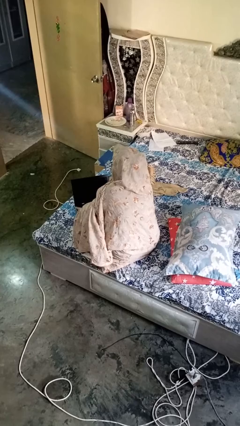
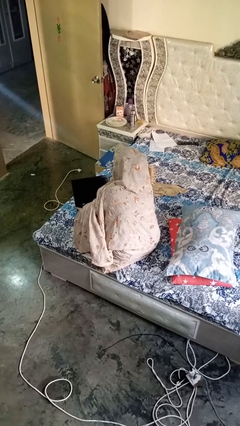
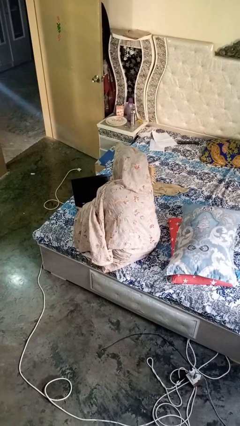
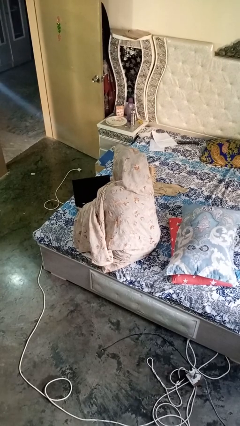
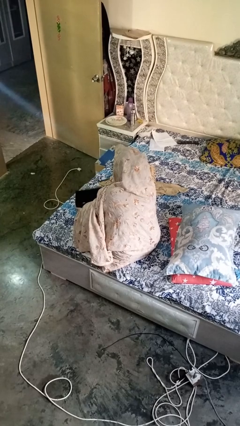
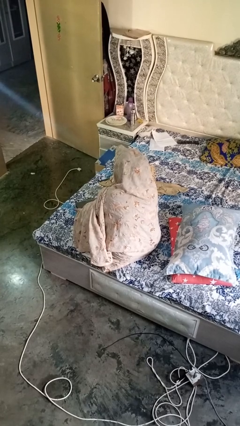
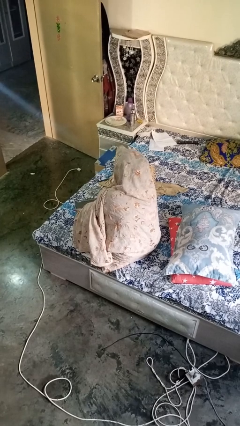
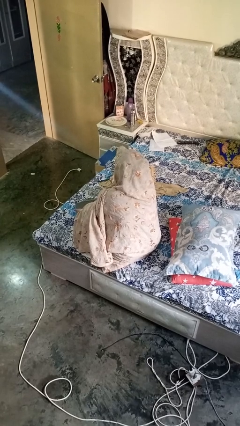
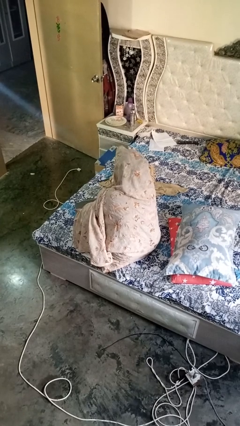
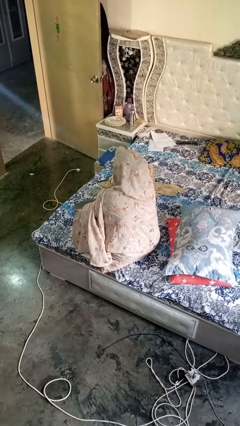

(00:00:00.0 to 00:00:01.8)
person closes laptop

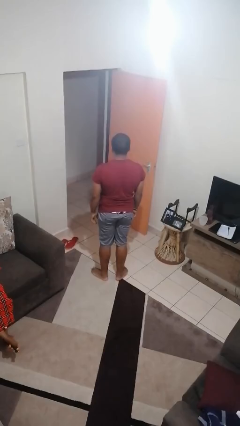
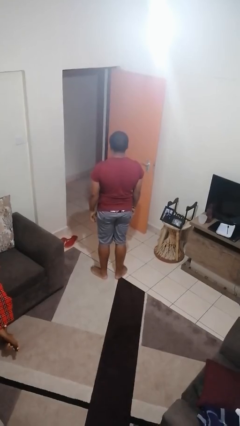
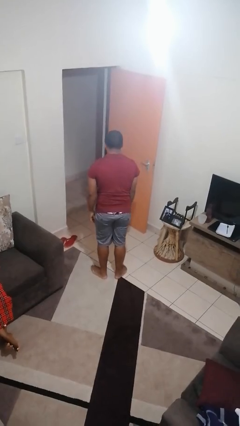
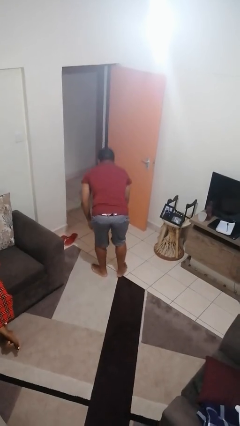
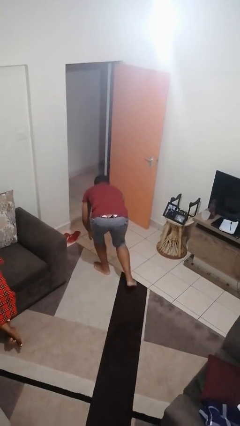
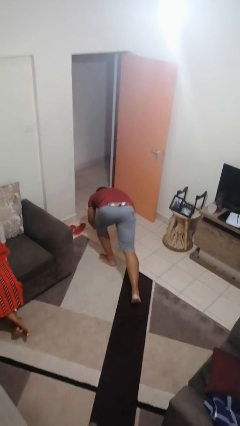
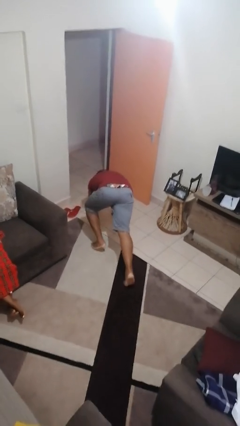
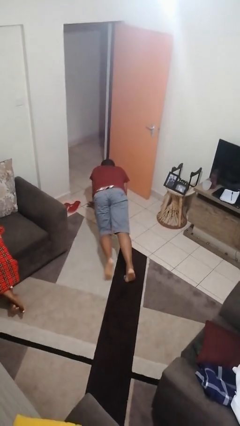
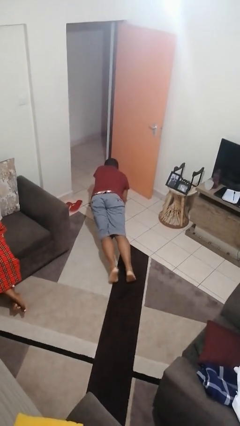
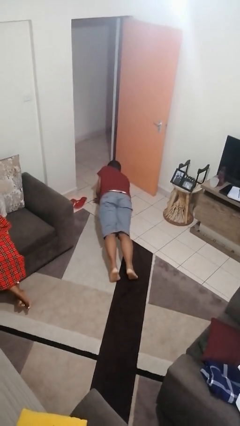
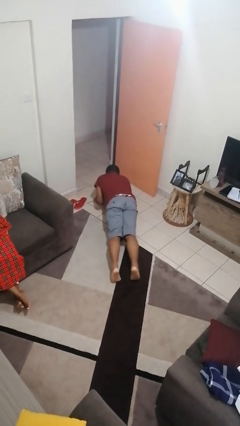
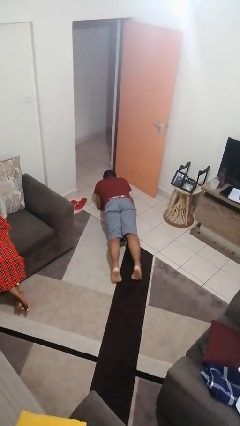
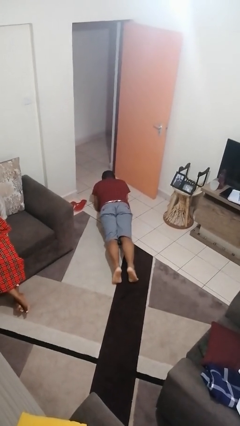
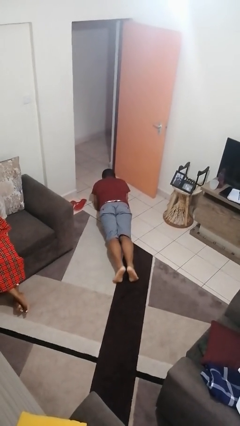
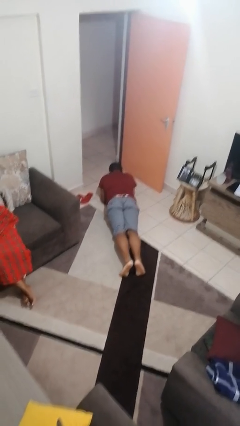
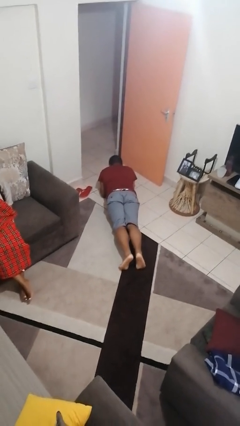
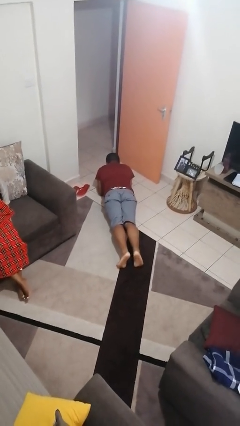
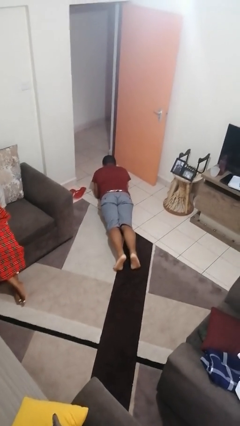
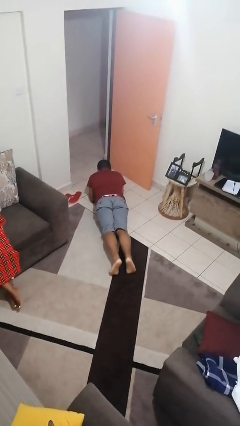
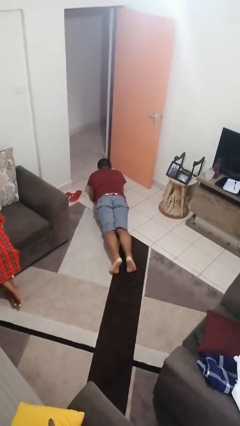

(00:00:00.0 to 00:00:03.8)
person exercises with plank

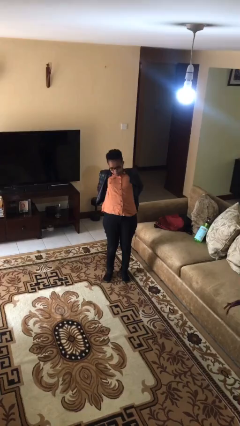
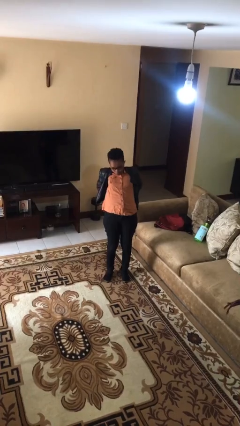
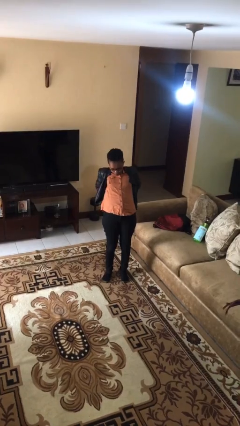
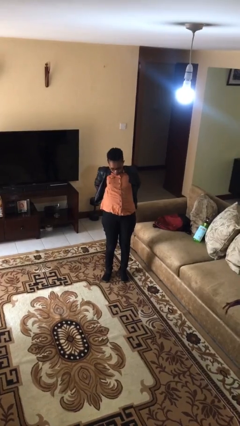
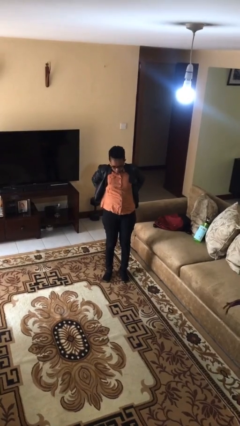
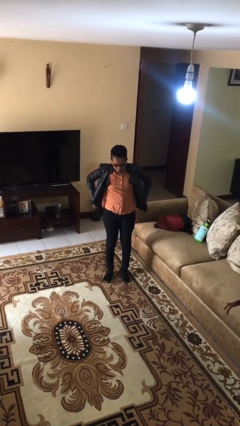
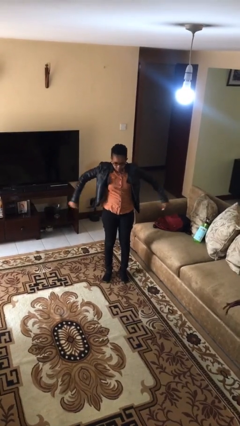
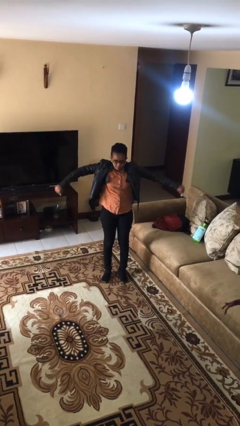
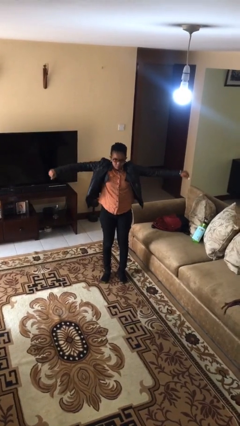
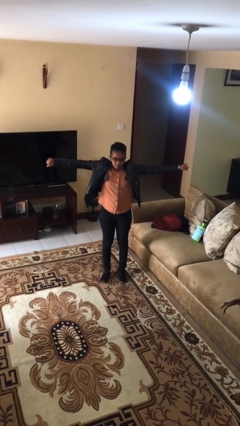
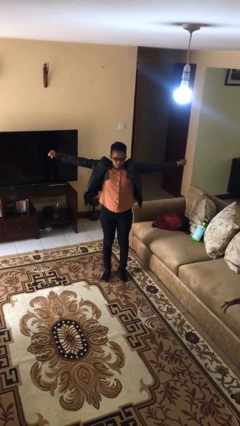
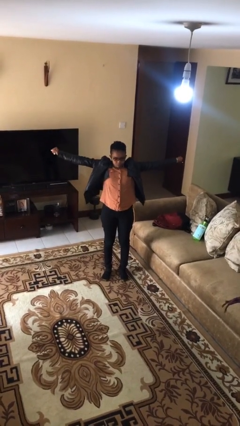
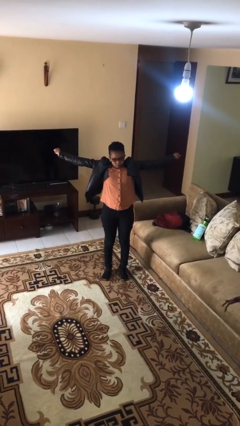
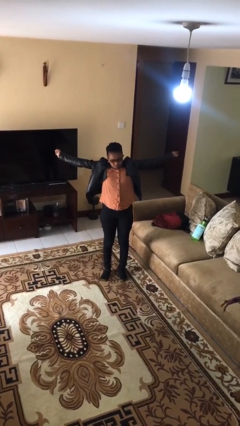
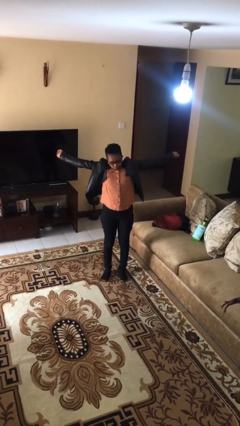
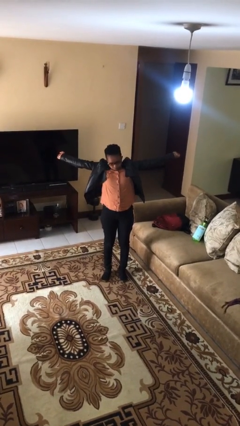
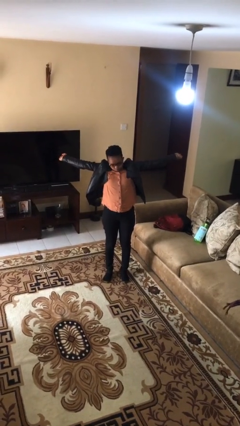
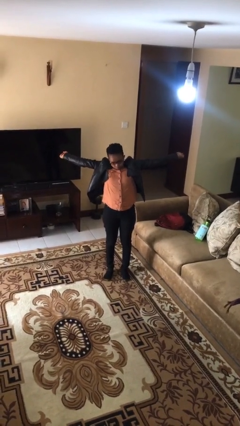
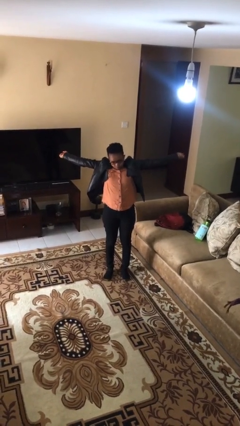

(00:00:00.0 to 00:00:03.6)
person stretches arms to side

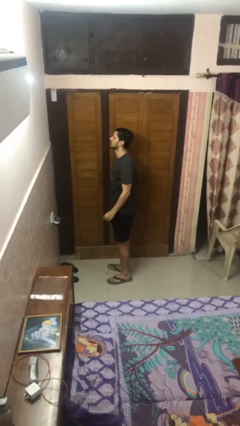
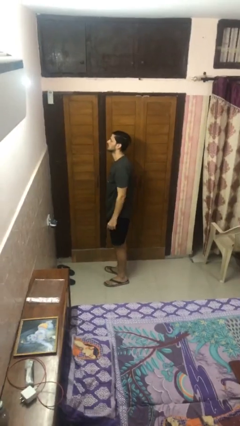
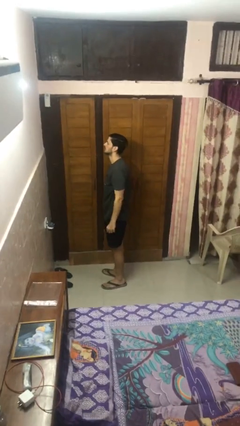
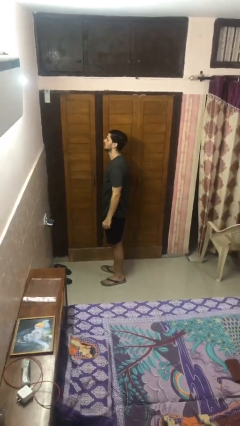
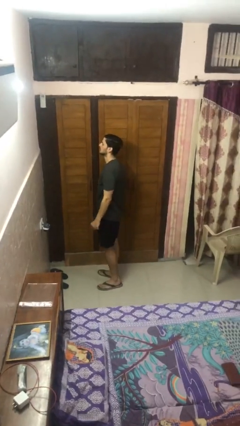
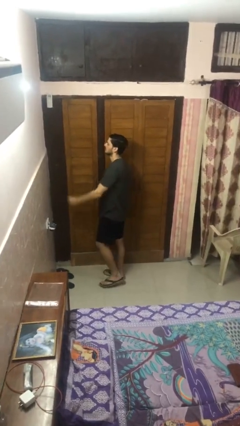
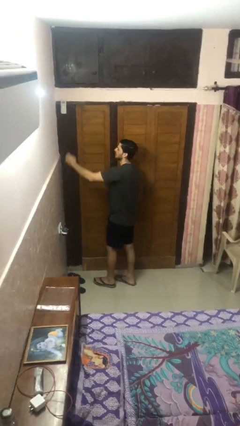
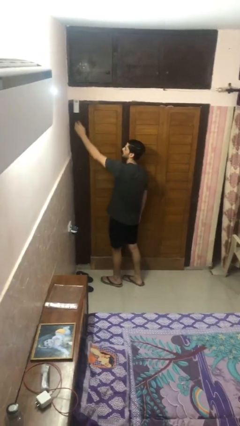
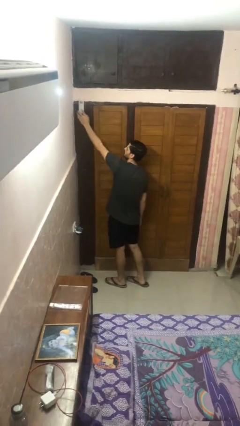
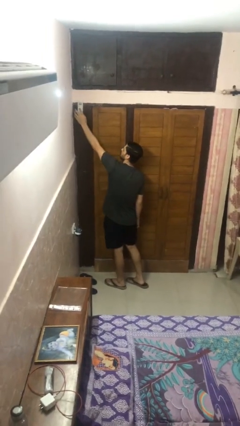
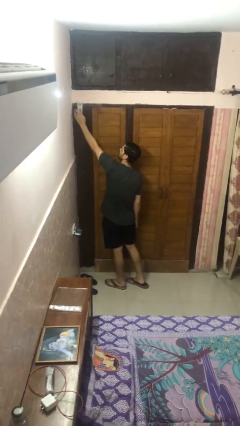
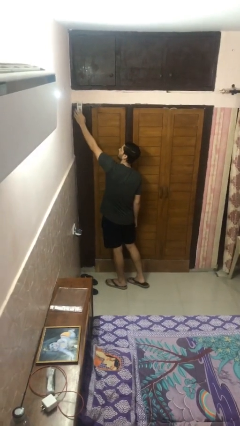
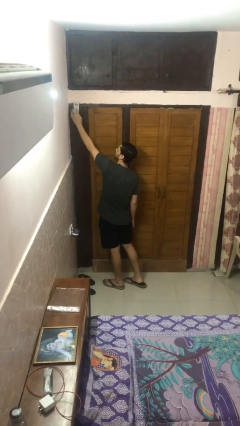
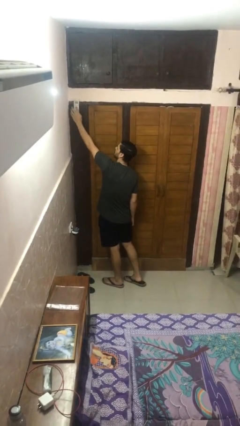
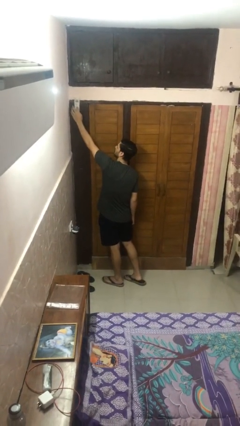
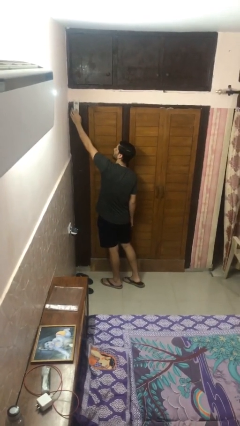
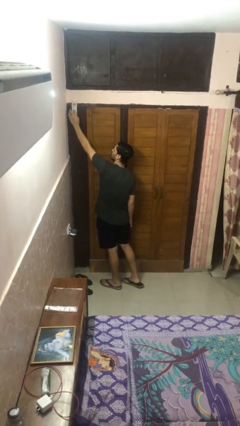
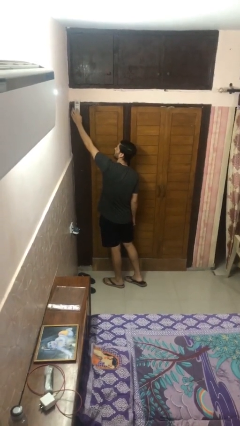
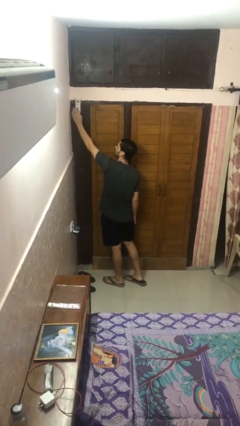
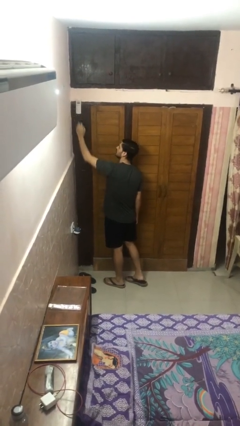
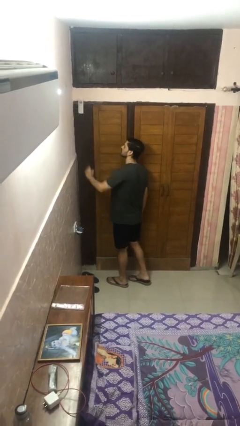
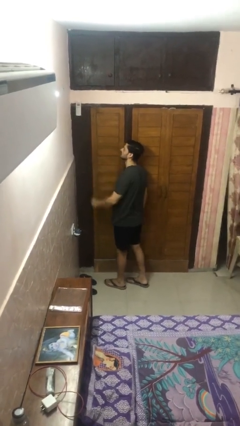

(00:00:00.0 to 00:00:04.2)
person adjusts thermostat

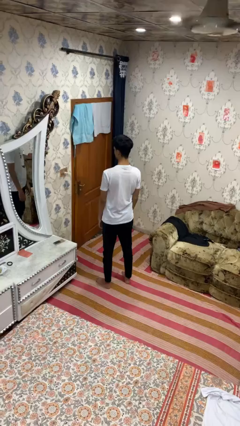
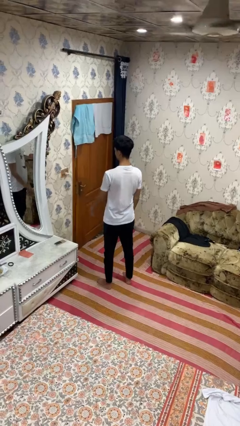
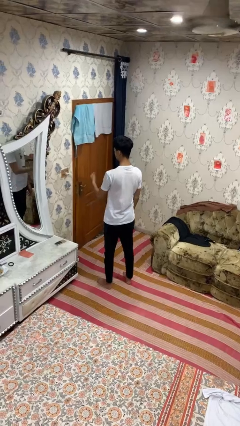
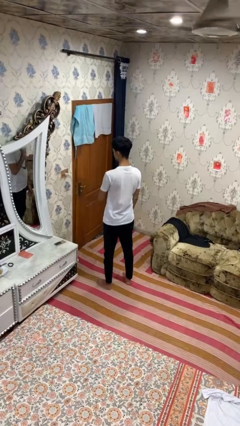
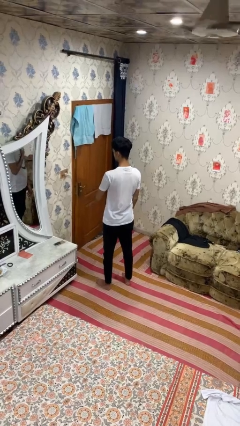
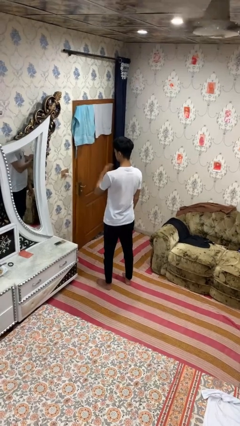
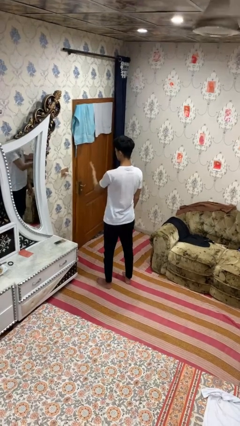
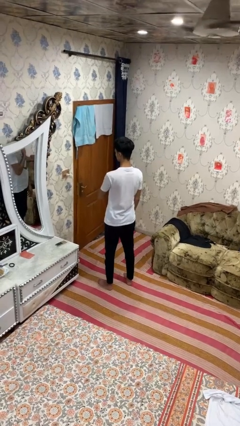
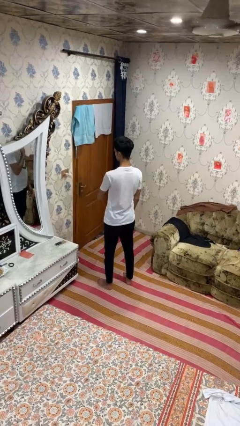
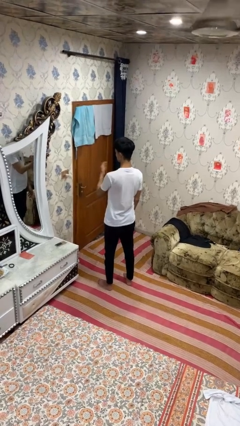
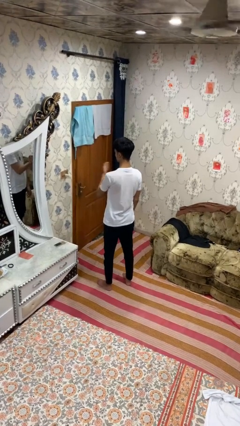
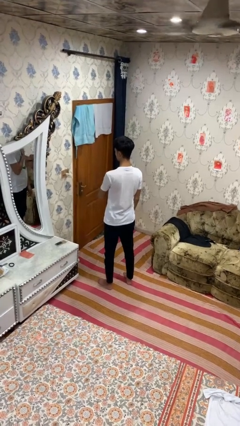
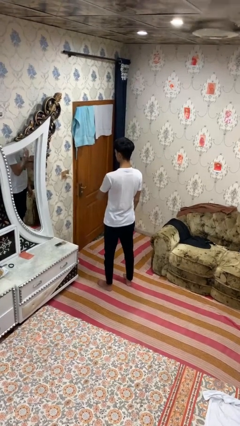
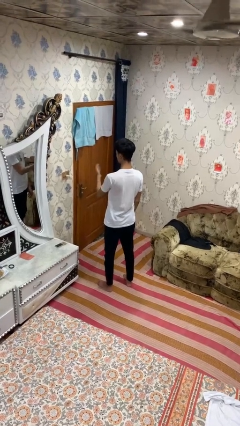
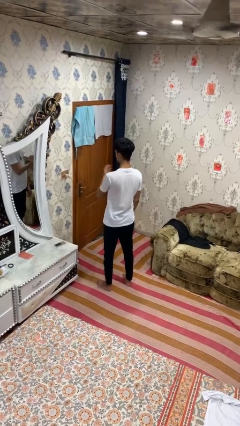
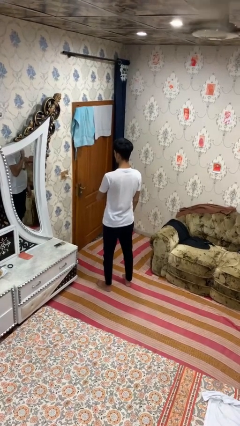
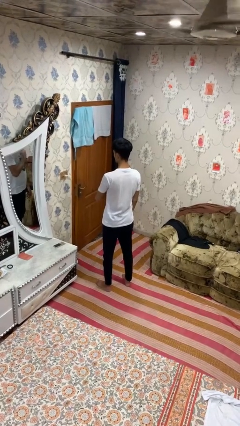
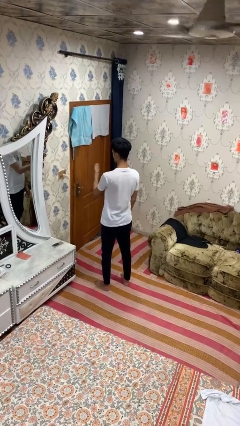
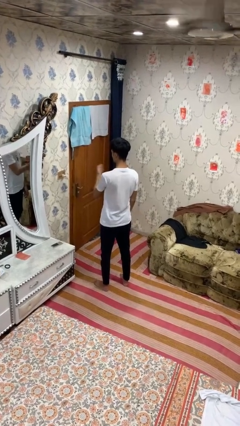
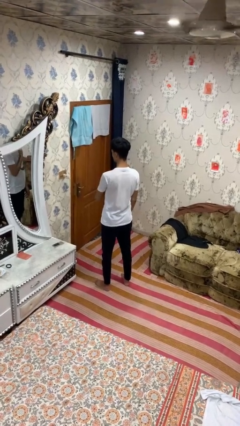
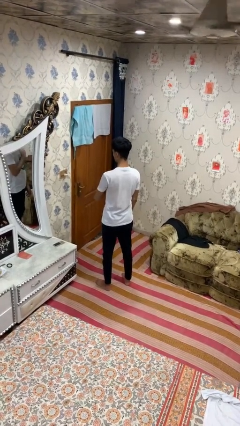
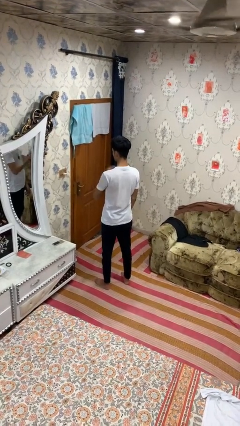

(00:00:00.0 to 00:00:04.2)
person drums on chest
